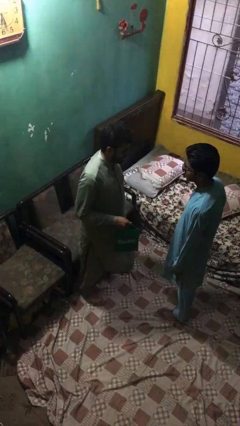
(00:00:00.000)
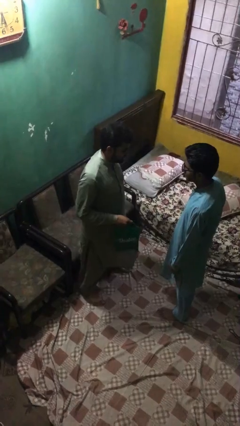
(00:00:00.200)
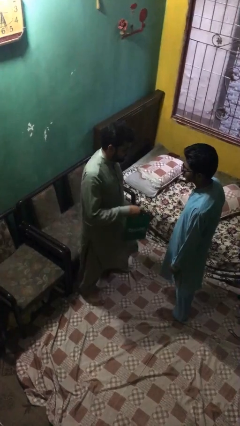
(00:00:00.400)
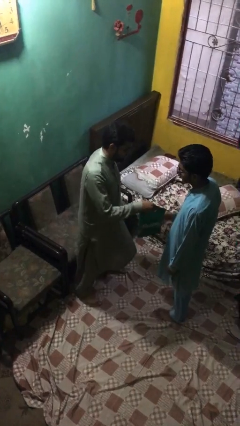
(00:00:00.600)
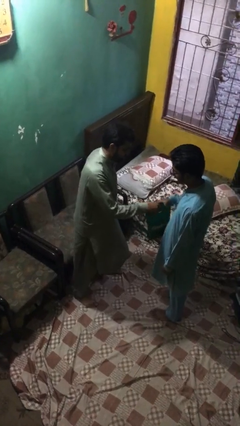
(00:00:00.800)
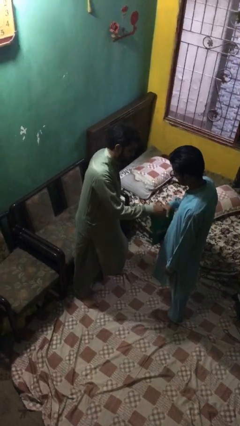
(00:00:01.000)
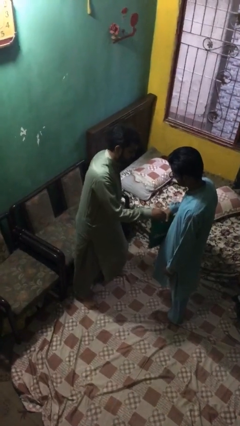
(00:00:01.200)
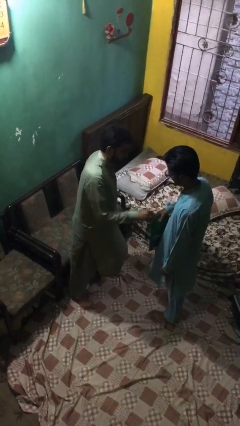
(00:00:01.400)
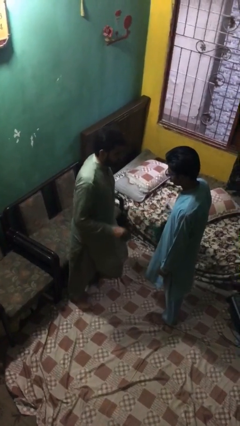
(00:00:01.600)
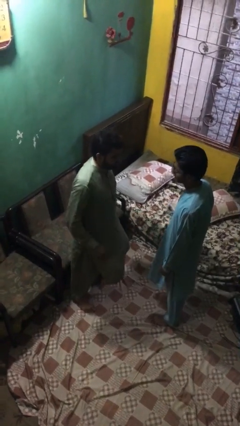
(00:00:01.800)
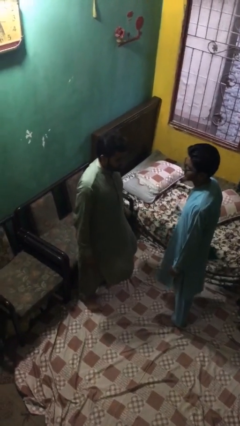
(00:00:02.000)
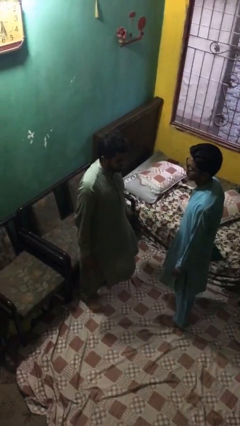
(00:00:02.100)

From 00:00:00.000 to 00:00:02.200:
person transfers object to person

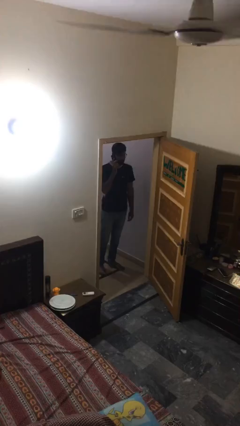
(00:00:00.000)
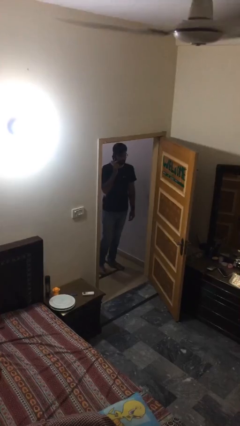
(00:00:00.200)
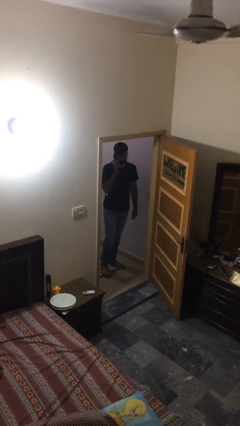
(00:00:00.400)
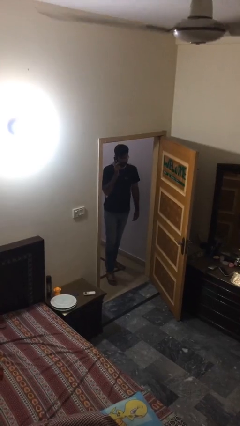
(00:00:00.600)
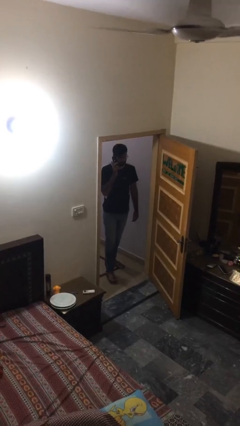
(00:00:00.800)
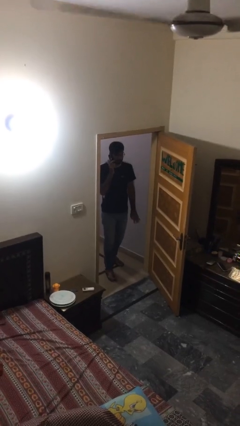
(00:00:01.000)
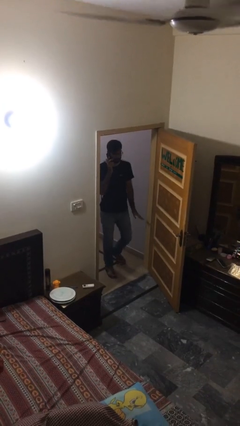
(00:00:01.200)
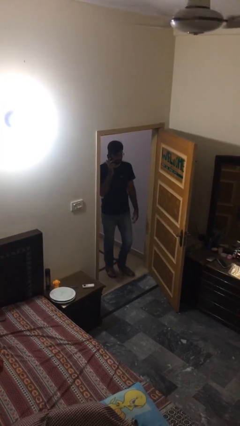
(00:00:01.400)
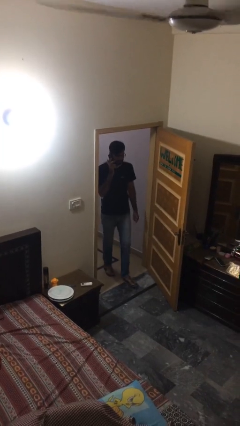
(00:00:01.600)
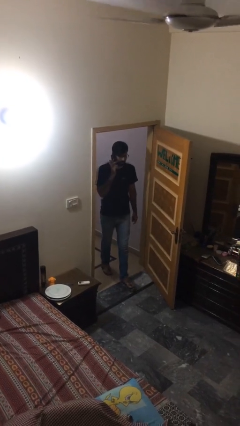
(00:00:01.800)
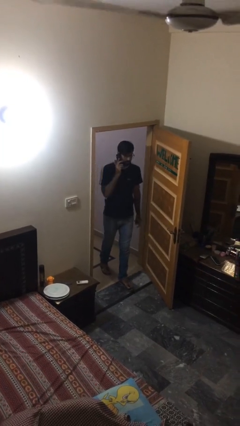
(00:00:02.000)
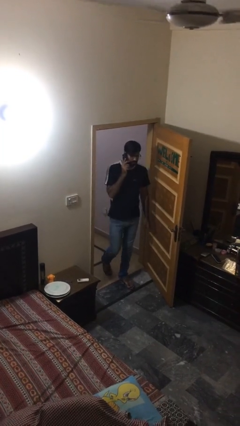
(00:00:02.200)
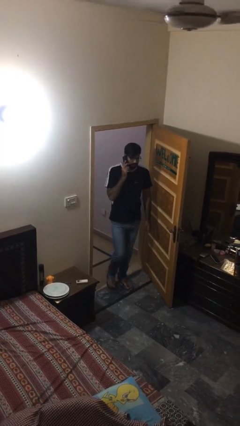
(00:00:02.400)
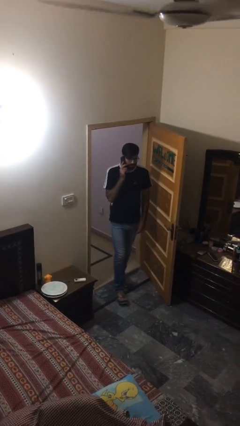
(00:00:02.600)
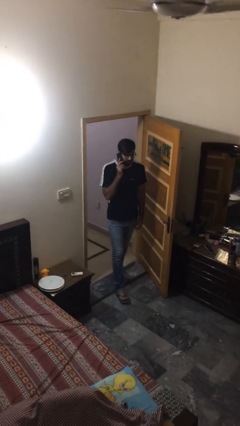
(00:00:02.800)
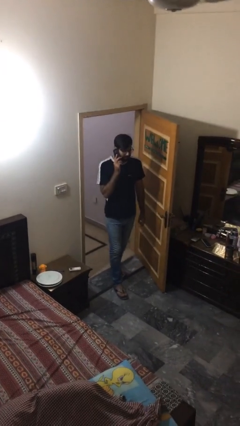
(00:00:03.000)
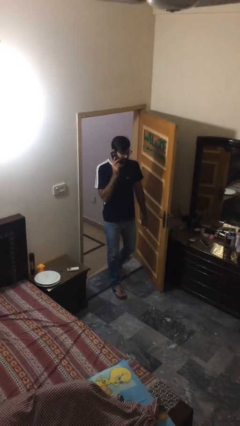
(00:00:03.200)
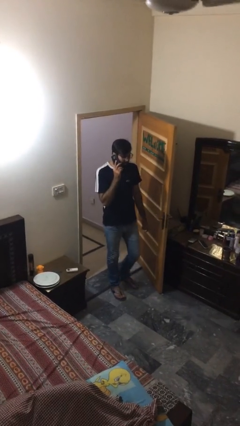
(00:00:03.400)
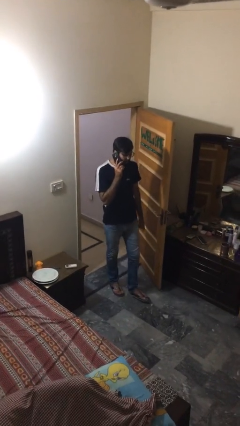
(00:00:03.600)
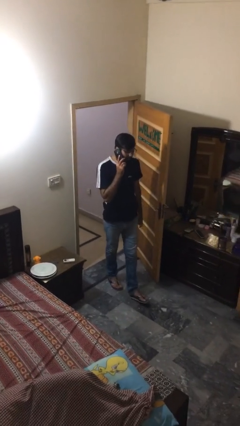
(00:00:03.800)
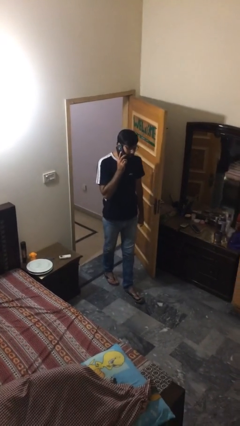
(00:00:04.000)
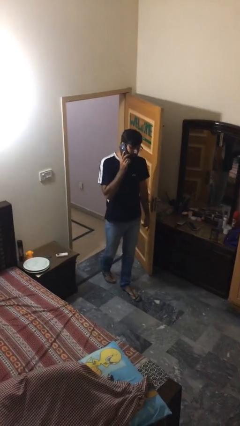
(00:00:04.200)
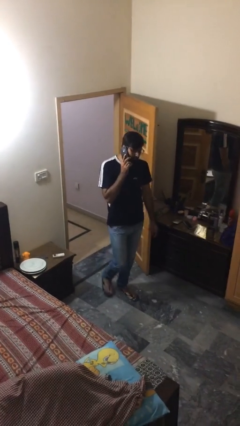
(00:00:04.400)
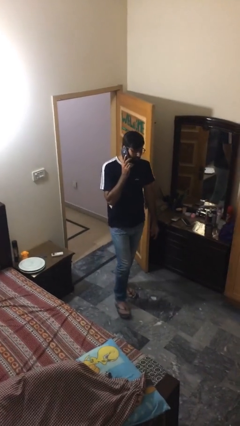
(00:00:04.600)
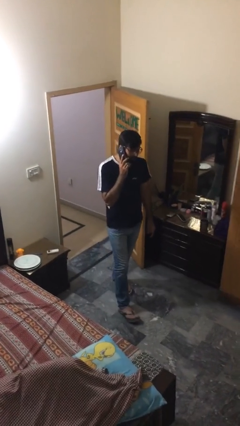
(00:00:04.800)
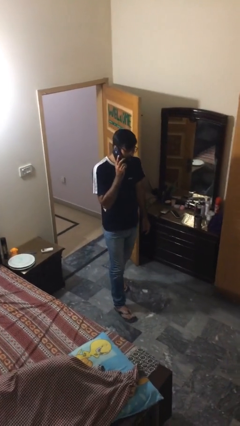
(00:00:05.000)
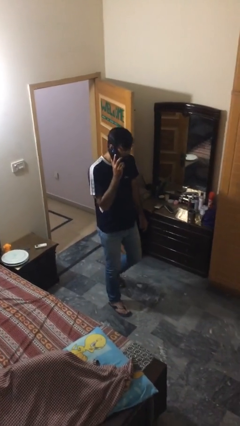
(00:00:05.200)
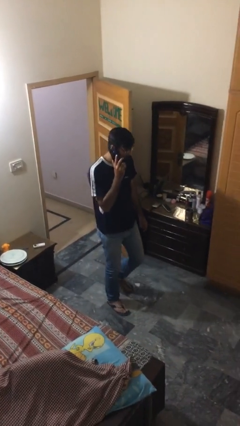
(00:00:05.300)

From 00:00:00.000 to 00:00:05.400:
person enters scene through structure

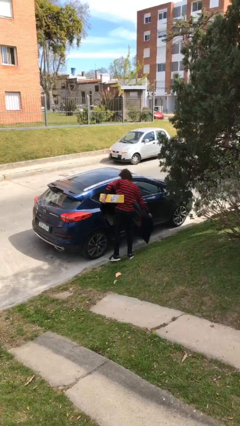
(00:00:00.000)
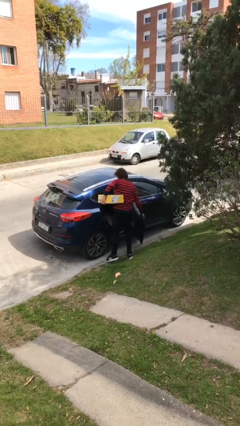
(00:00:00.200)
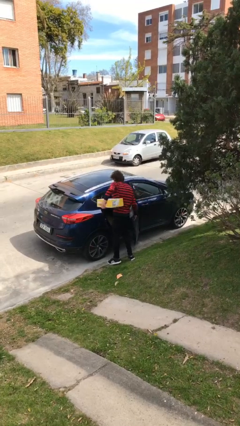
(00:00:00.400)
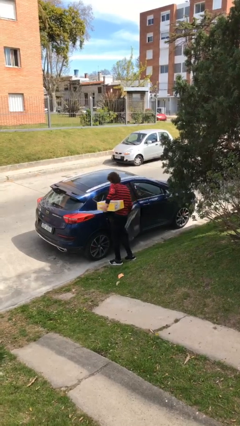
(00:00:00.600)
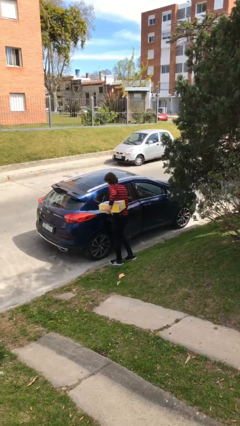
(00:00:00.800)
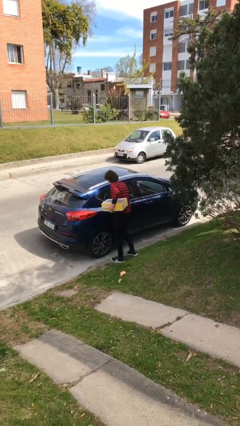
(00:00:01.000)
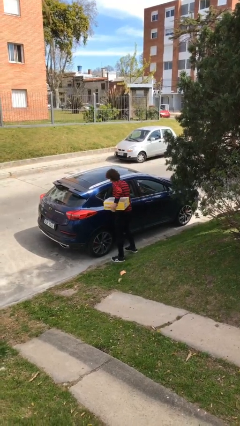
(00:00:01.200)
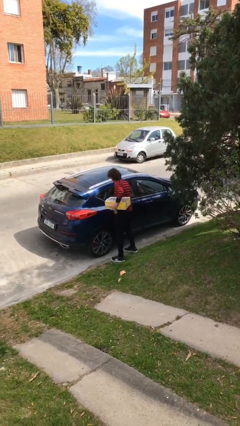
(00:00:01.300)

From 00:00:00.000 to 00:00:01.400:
person closes car door

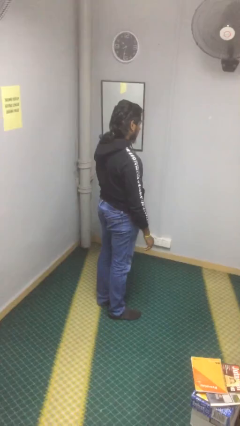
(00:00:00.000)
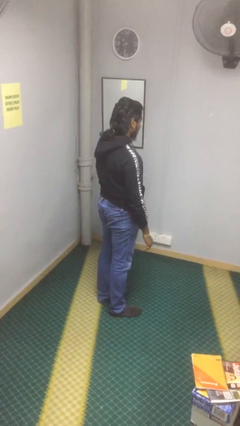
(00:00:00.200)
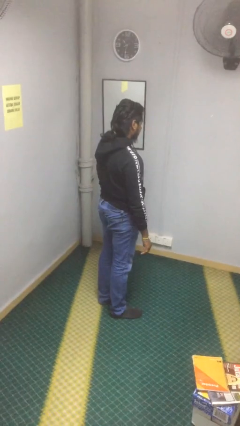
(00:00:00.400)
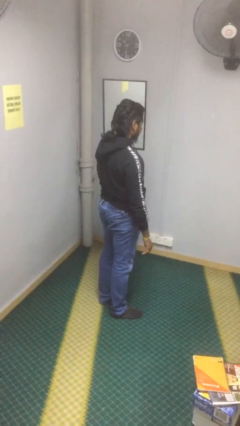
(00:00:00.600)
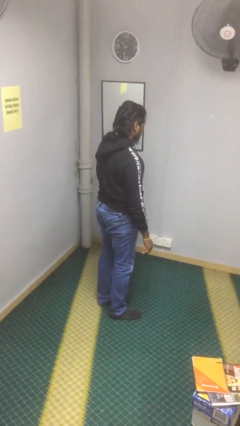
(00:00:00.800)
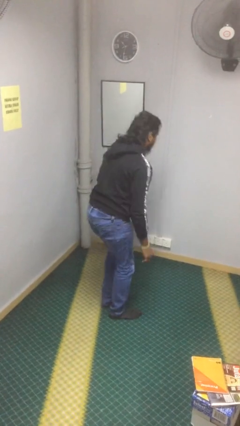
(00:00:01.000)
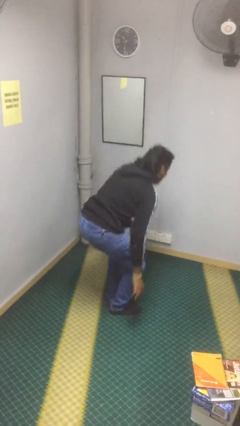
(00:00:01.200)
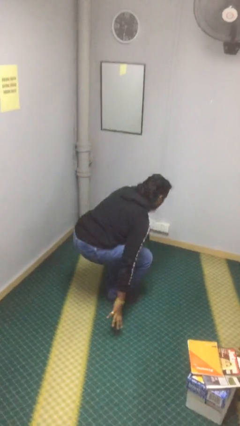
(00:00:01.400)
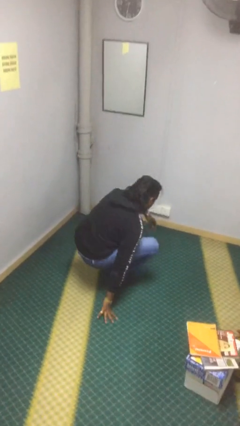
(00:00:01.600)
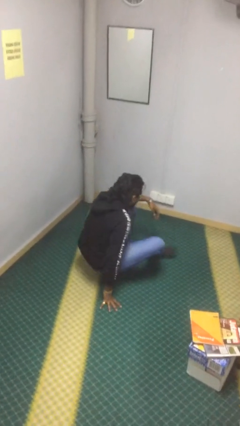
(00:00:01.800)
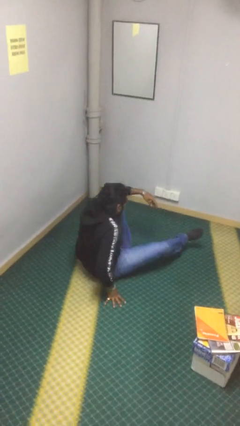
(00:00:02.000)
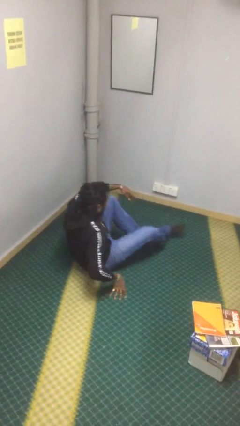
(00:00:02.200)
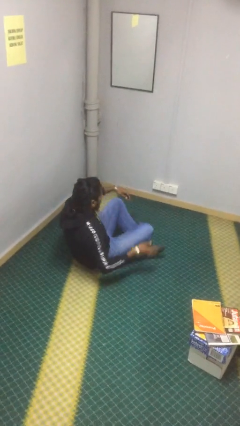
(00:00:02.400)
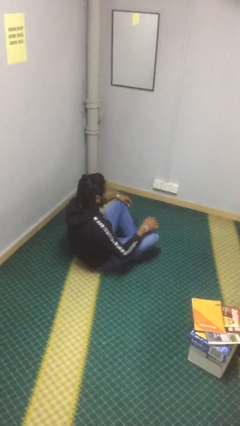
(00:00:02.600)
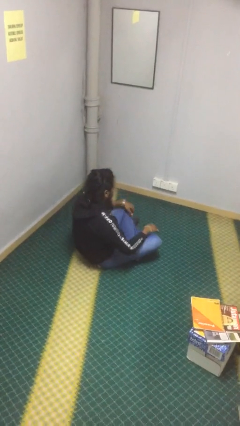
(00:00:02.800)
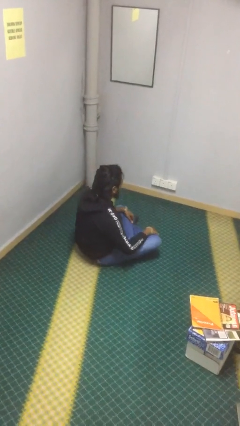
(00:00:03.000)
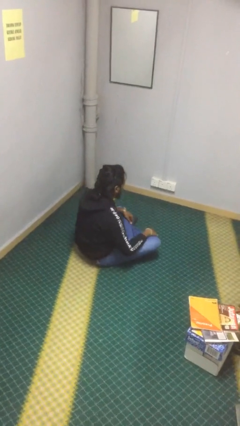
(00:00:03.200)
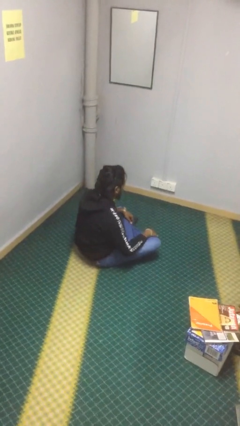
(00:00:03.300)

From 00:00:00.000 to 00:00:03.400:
person sits crisscross

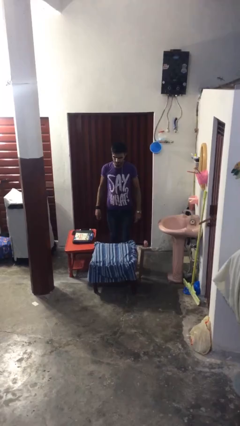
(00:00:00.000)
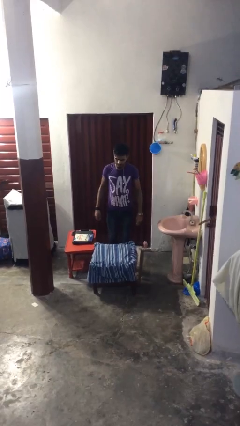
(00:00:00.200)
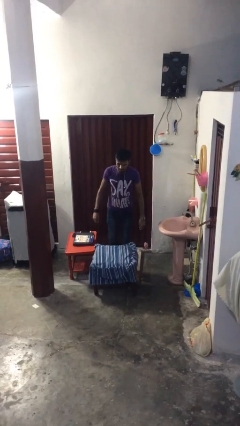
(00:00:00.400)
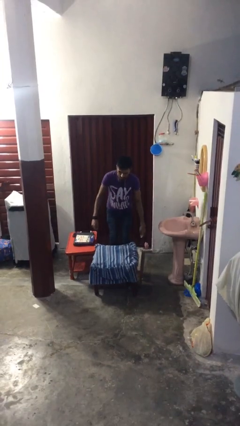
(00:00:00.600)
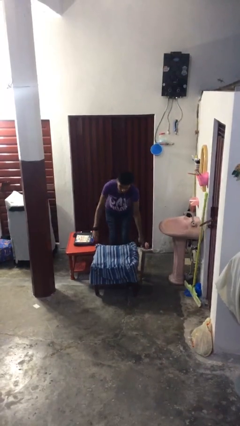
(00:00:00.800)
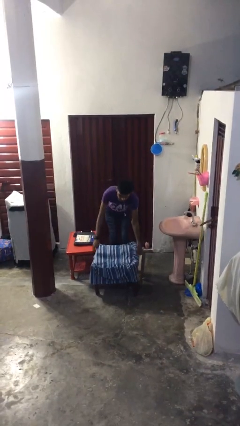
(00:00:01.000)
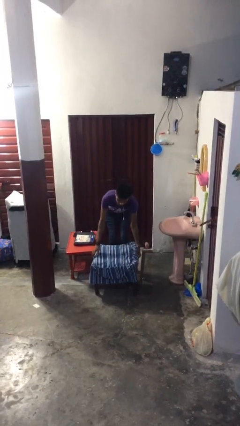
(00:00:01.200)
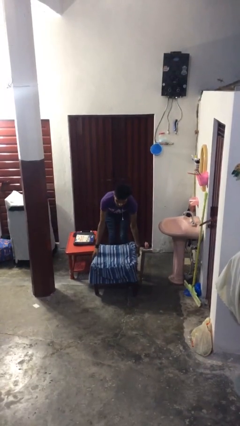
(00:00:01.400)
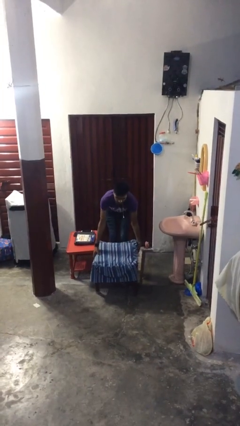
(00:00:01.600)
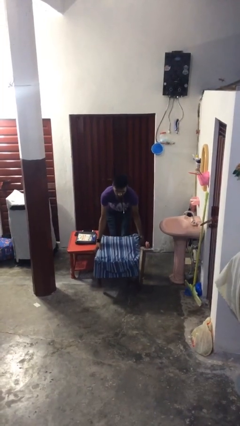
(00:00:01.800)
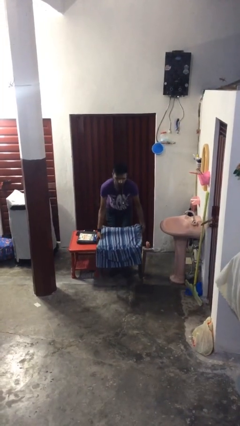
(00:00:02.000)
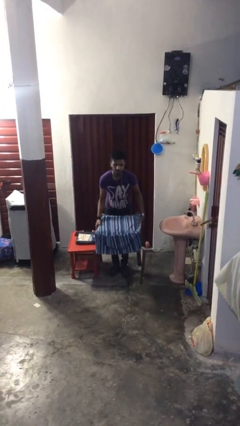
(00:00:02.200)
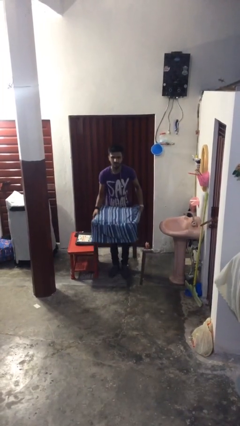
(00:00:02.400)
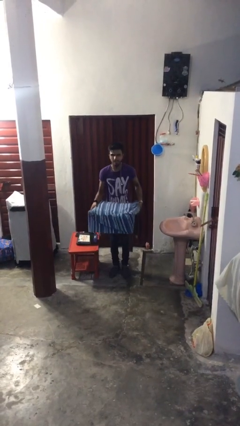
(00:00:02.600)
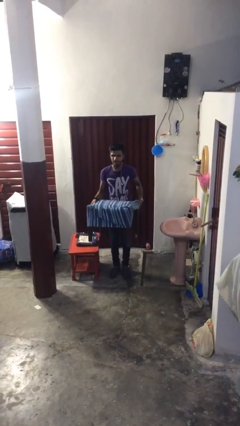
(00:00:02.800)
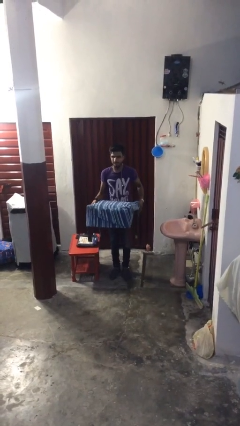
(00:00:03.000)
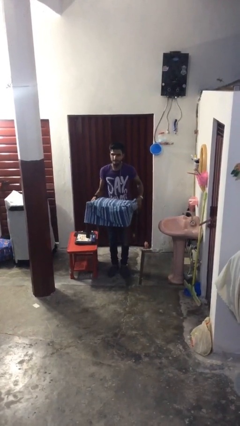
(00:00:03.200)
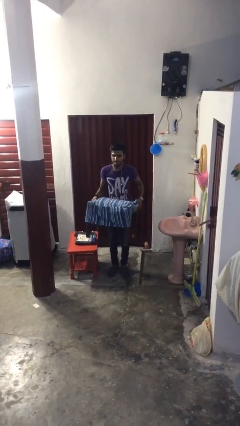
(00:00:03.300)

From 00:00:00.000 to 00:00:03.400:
person picks up object from floor

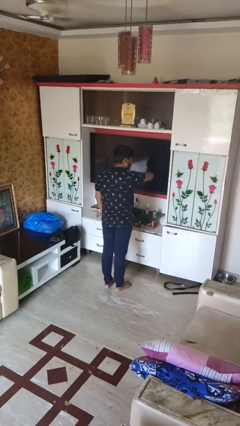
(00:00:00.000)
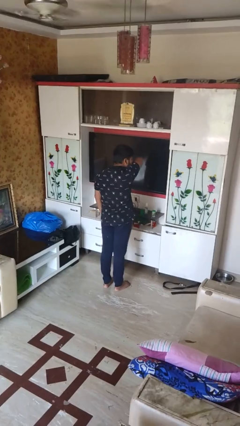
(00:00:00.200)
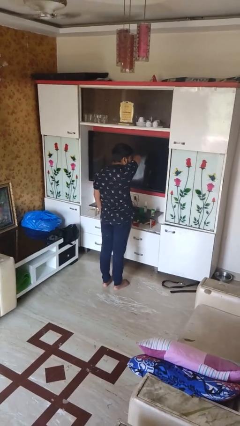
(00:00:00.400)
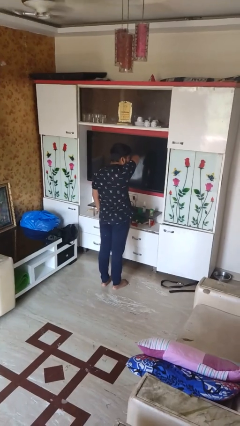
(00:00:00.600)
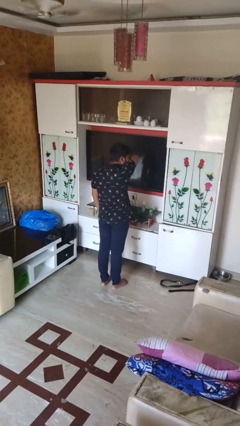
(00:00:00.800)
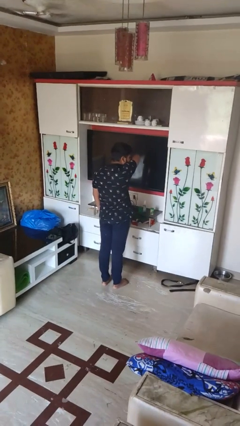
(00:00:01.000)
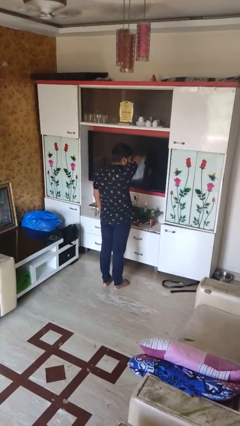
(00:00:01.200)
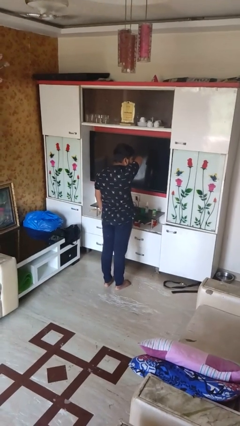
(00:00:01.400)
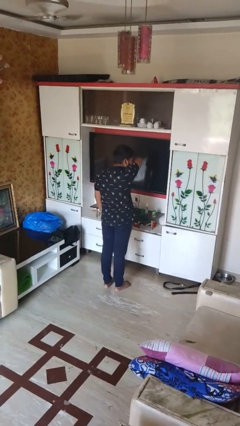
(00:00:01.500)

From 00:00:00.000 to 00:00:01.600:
person sneezes into arm
